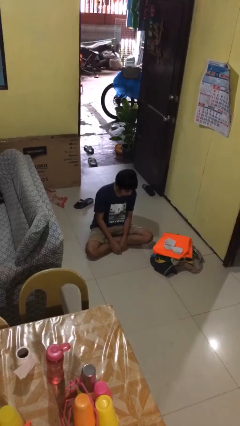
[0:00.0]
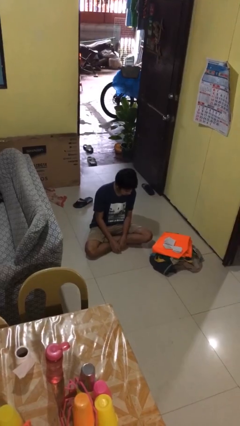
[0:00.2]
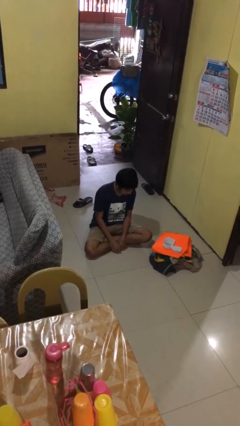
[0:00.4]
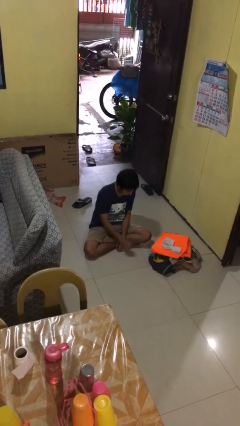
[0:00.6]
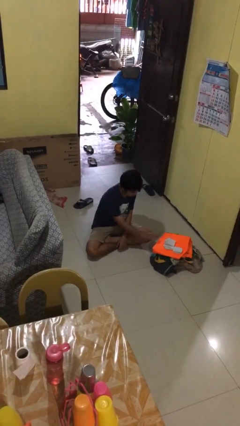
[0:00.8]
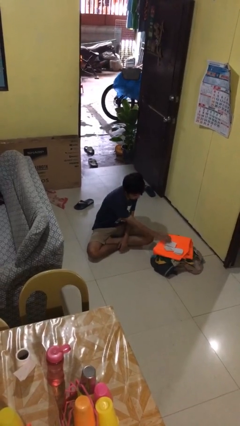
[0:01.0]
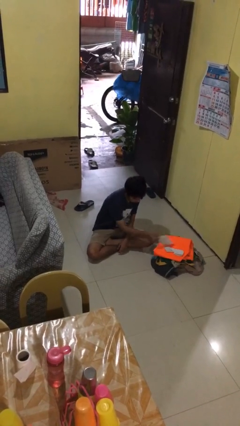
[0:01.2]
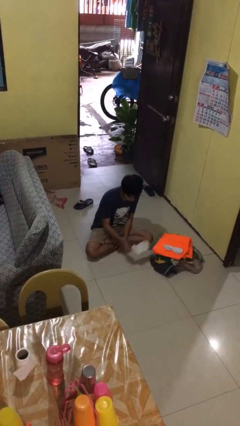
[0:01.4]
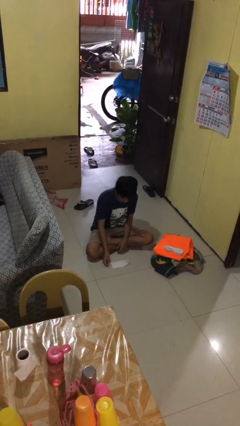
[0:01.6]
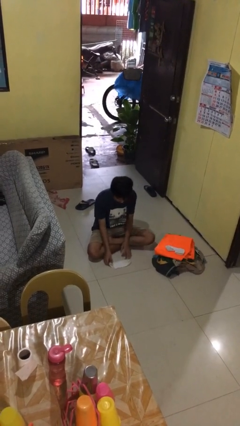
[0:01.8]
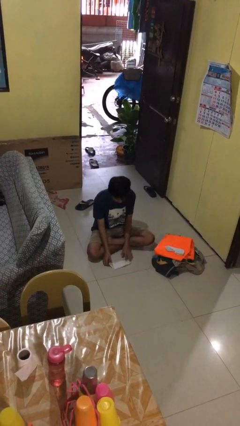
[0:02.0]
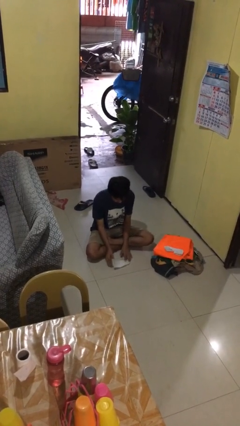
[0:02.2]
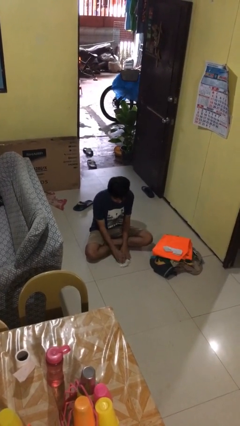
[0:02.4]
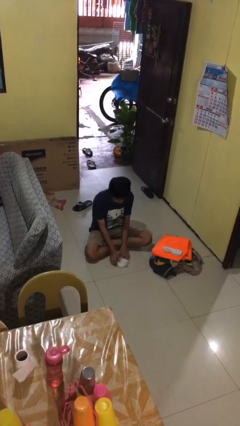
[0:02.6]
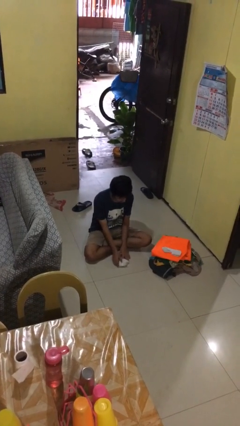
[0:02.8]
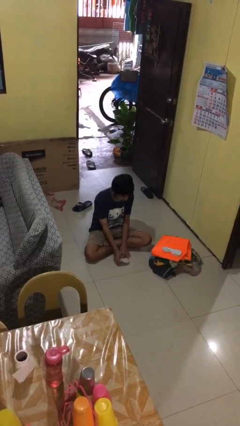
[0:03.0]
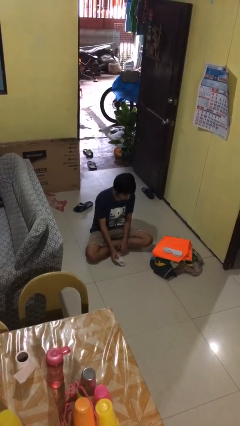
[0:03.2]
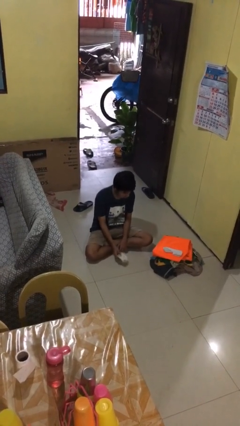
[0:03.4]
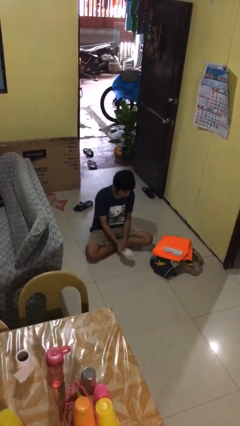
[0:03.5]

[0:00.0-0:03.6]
person folds socks

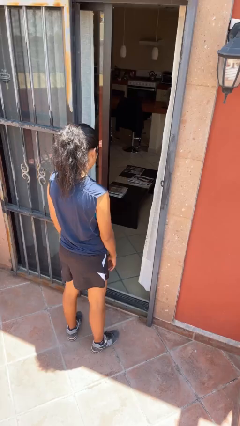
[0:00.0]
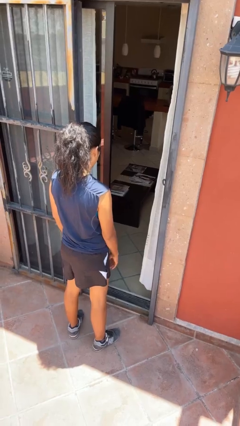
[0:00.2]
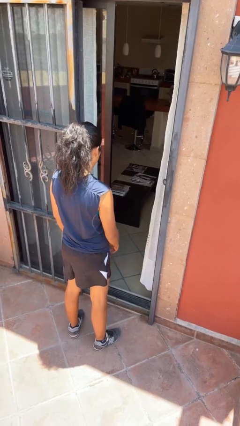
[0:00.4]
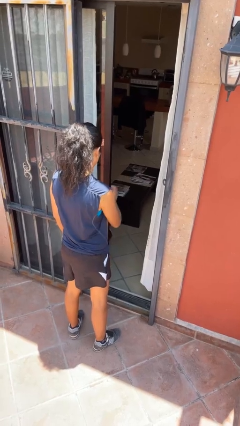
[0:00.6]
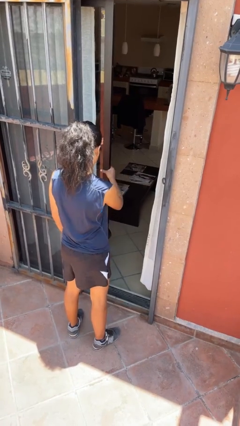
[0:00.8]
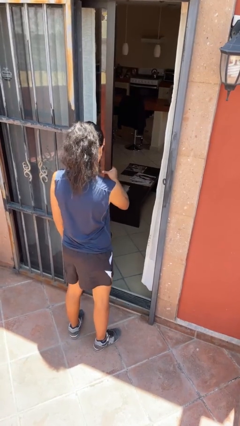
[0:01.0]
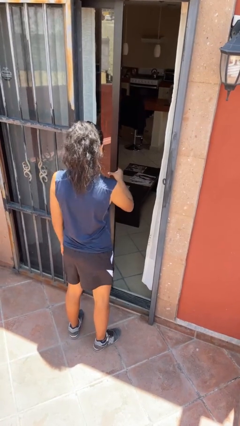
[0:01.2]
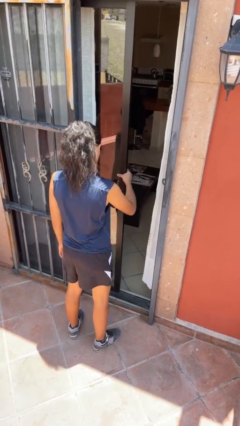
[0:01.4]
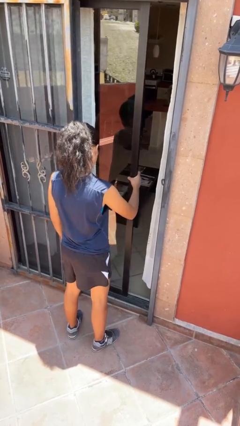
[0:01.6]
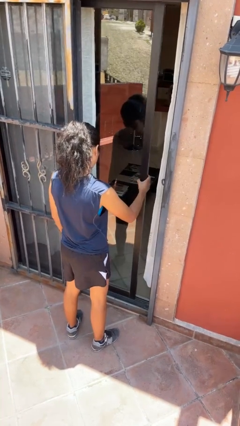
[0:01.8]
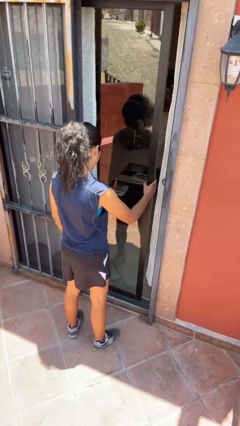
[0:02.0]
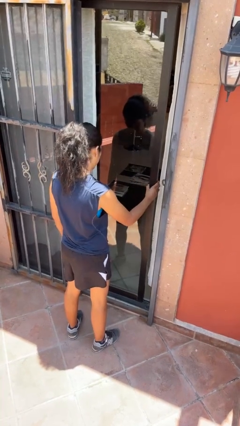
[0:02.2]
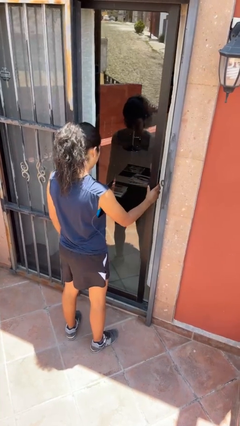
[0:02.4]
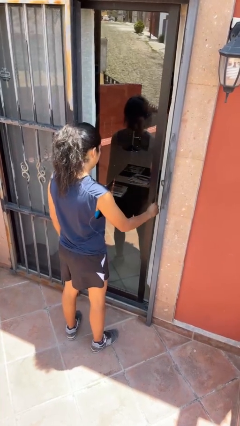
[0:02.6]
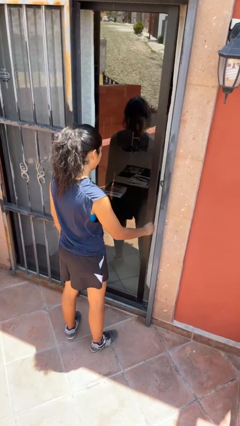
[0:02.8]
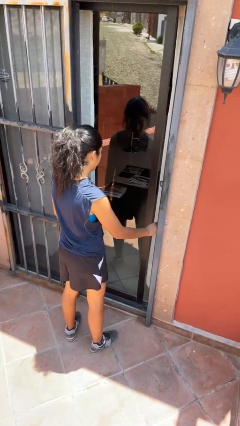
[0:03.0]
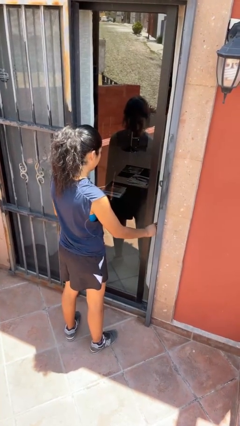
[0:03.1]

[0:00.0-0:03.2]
person closes sliding door

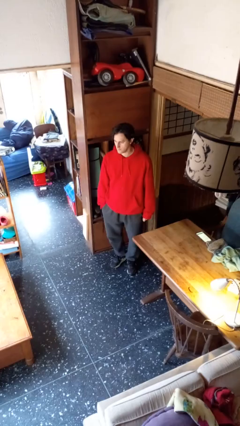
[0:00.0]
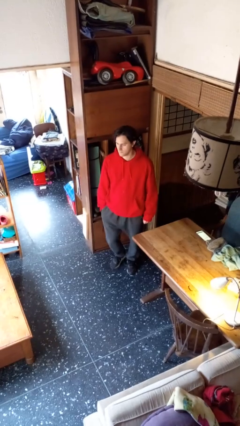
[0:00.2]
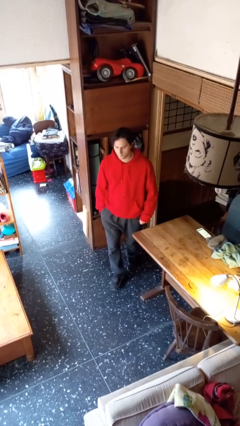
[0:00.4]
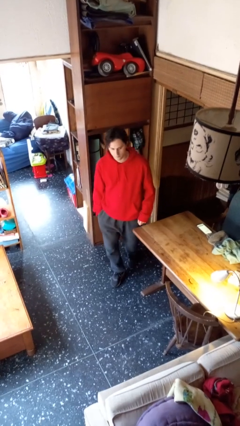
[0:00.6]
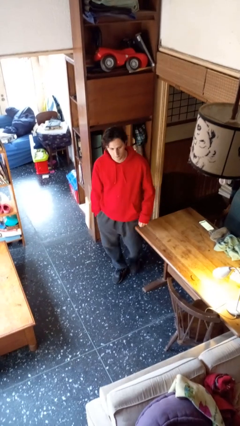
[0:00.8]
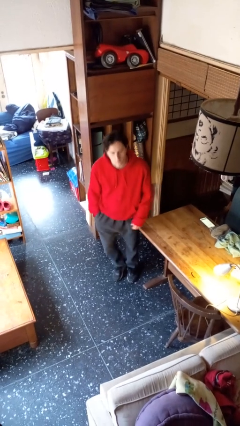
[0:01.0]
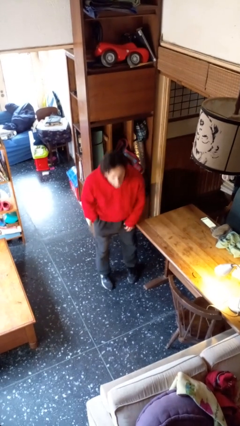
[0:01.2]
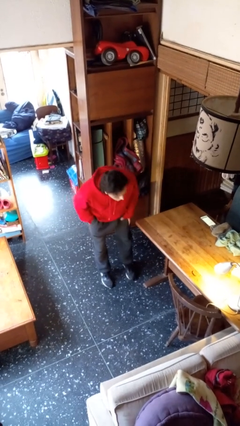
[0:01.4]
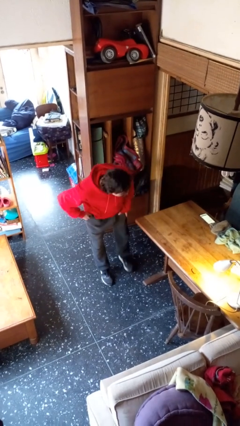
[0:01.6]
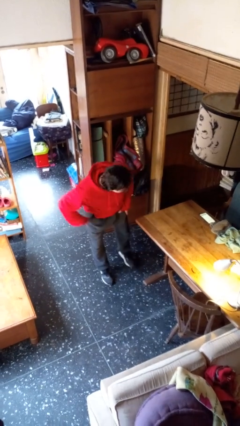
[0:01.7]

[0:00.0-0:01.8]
person bumps into table

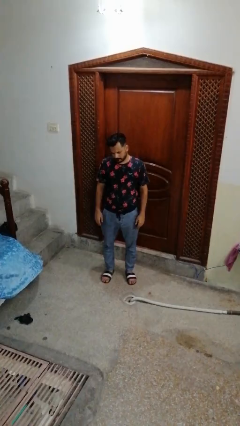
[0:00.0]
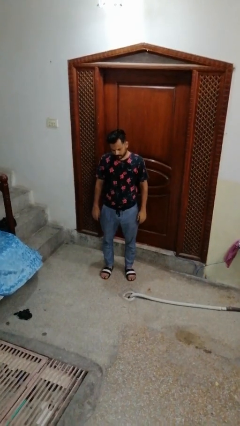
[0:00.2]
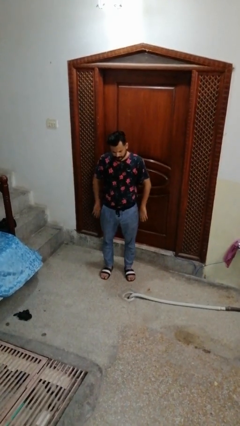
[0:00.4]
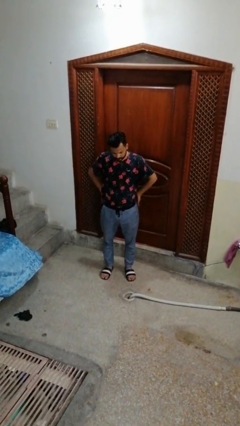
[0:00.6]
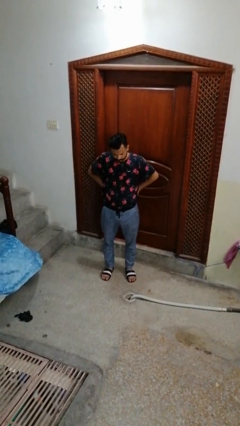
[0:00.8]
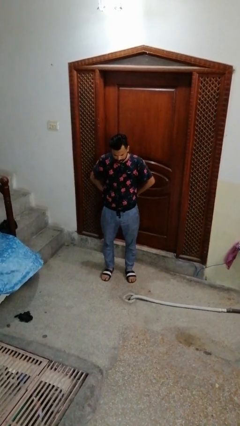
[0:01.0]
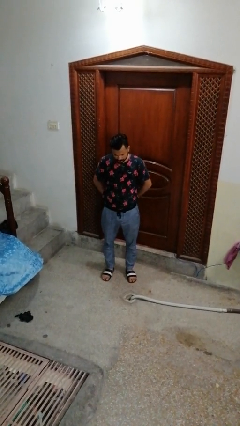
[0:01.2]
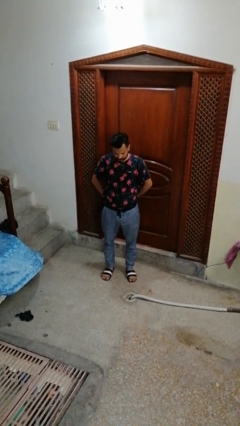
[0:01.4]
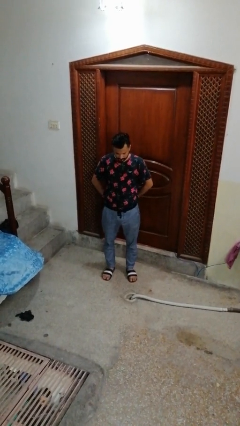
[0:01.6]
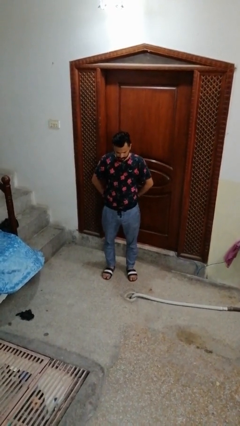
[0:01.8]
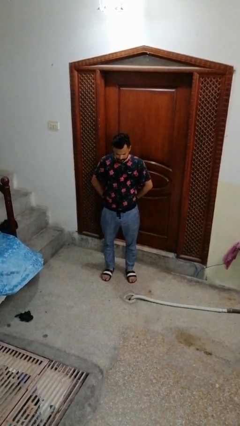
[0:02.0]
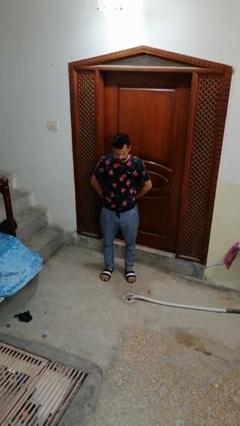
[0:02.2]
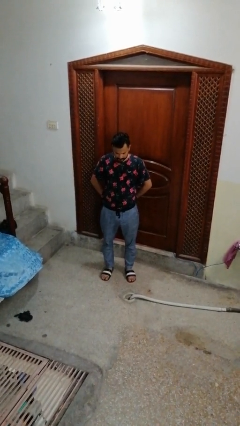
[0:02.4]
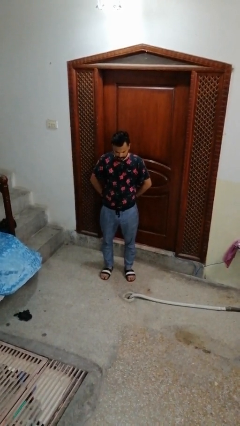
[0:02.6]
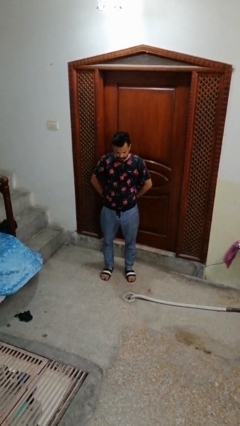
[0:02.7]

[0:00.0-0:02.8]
person puts hands in back pockets

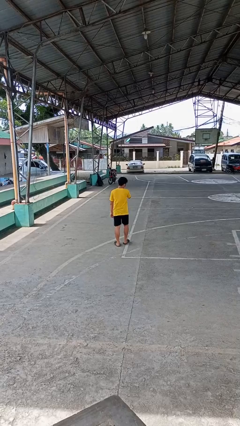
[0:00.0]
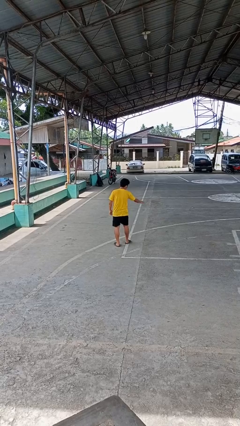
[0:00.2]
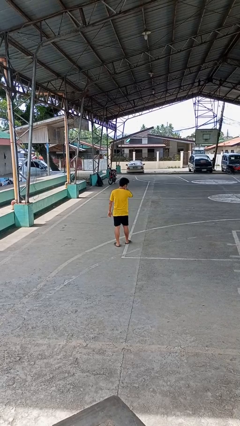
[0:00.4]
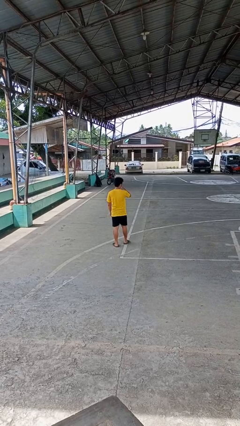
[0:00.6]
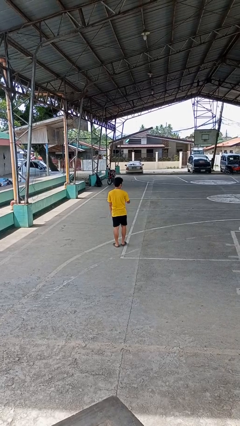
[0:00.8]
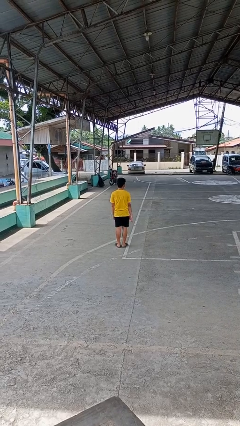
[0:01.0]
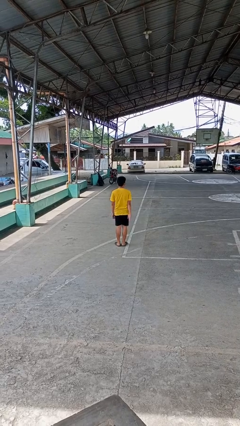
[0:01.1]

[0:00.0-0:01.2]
person karate chop

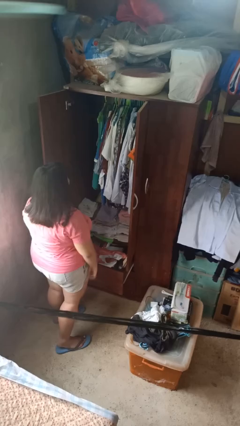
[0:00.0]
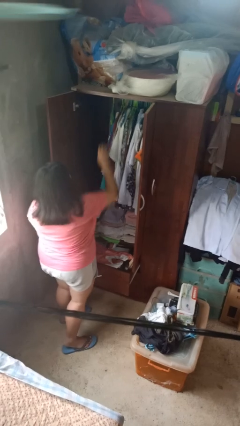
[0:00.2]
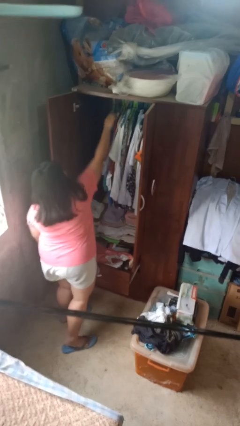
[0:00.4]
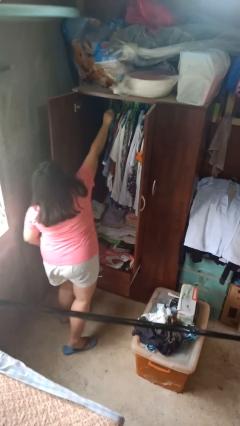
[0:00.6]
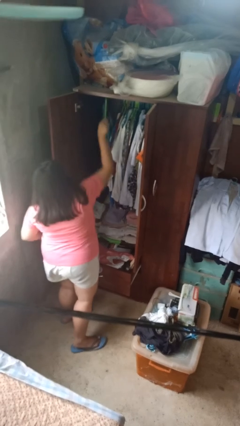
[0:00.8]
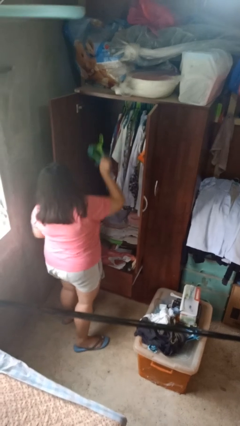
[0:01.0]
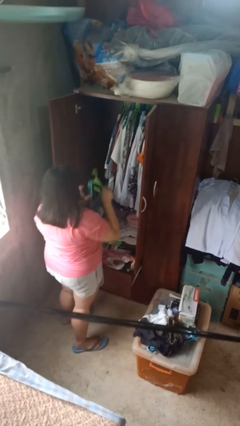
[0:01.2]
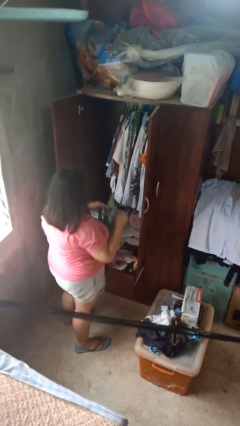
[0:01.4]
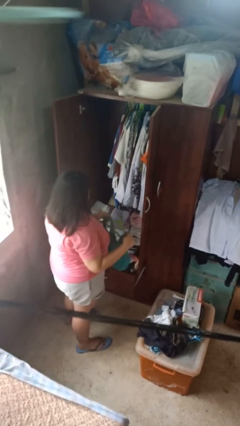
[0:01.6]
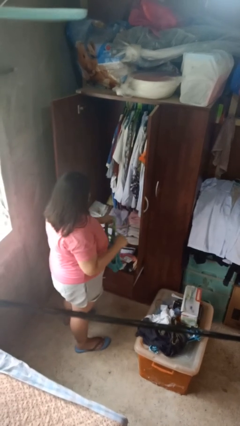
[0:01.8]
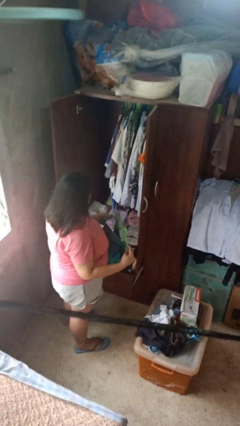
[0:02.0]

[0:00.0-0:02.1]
person takes clothes from closet

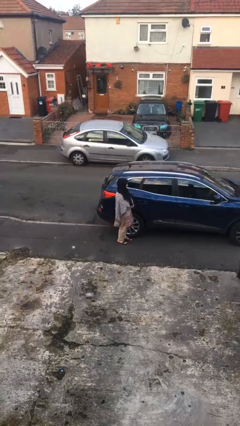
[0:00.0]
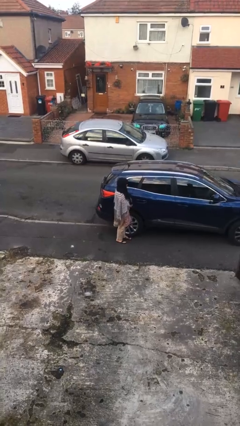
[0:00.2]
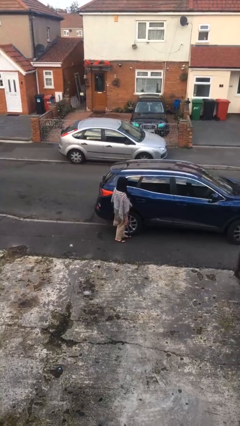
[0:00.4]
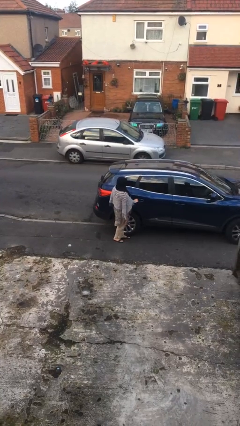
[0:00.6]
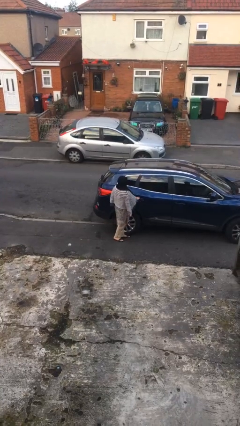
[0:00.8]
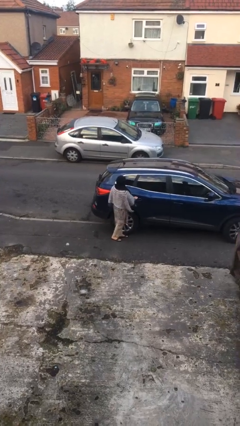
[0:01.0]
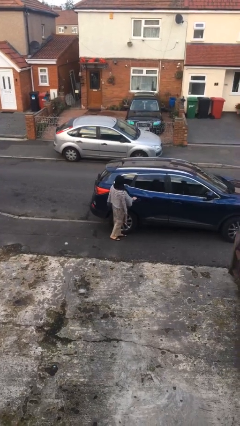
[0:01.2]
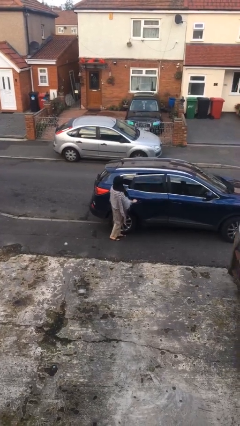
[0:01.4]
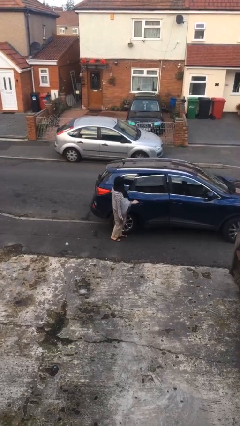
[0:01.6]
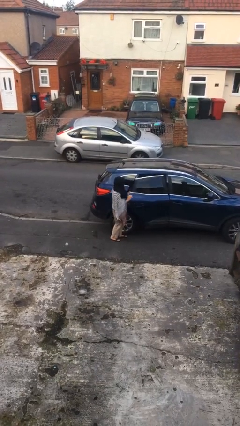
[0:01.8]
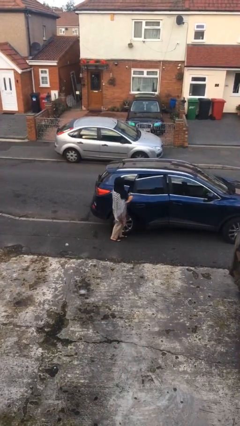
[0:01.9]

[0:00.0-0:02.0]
person opens car door
